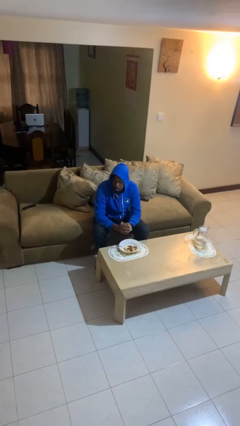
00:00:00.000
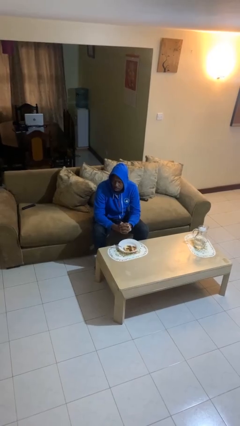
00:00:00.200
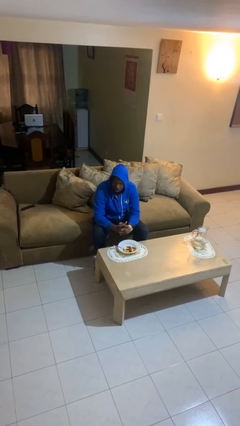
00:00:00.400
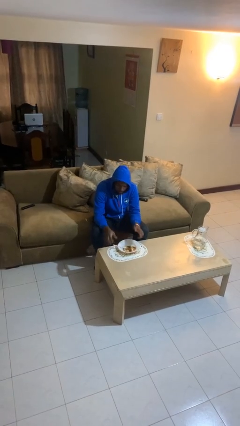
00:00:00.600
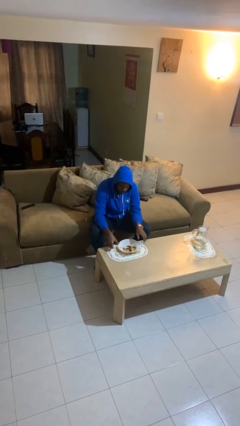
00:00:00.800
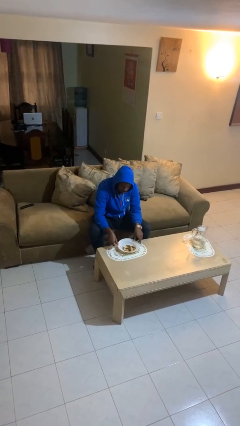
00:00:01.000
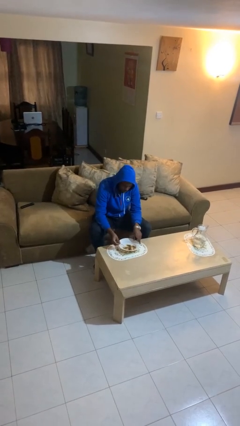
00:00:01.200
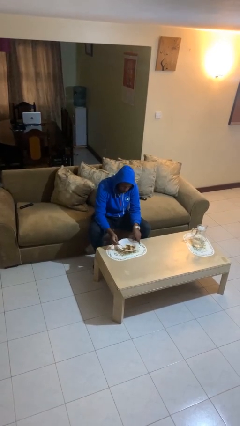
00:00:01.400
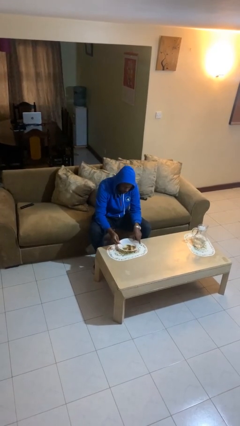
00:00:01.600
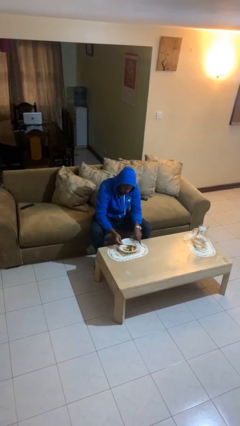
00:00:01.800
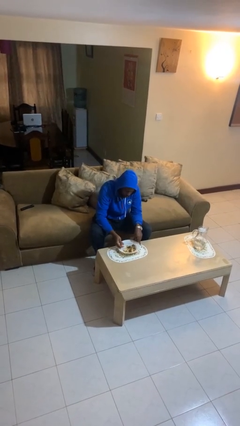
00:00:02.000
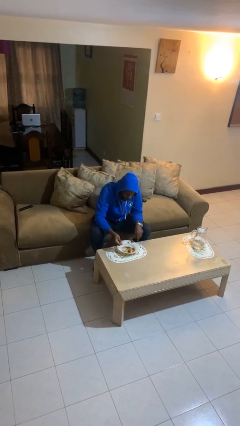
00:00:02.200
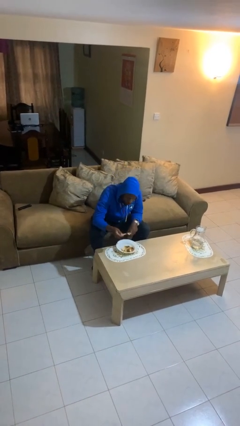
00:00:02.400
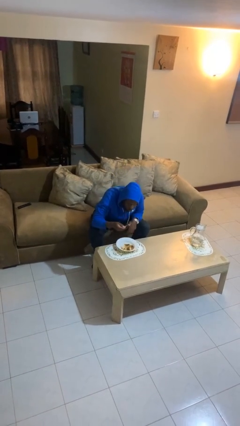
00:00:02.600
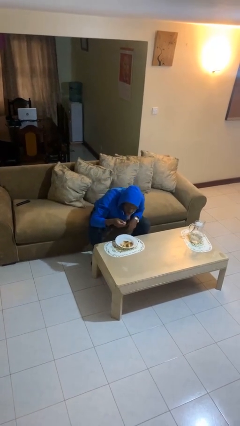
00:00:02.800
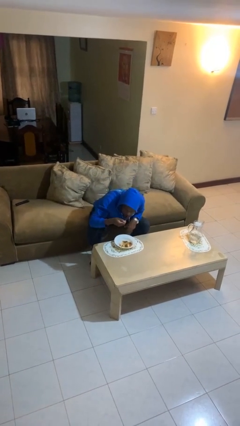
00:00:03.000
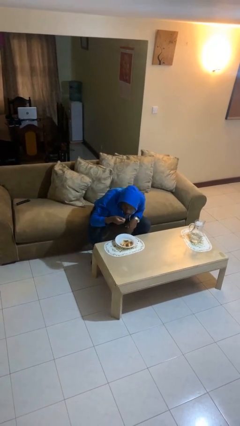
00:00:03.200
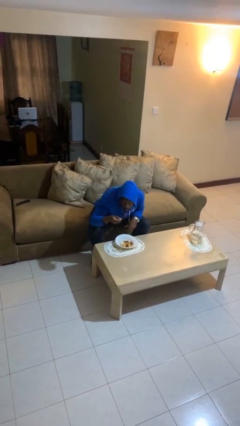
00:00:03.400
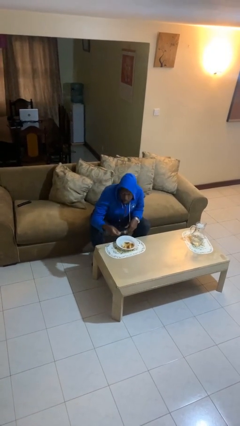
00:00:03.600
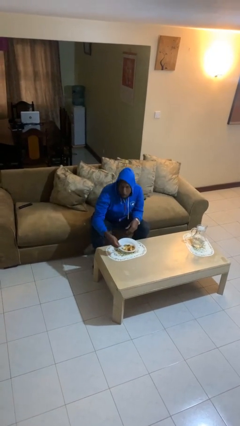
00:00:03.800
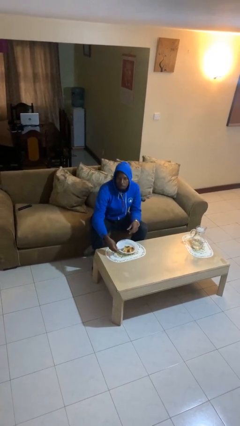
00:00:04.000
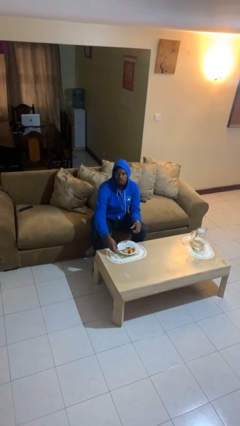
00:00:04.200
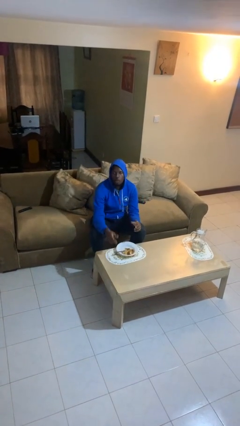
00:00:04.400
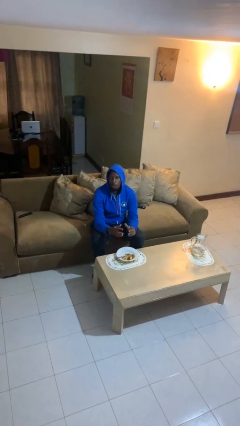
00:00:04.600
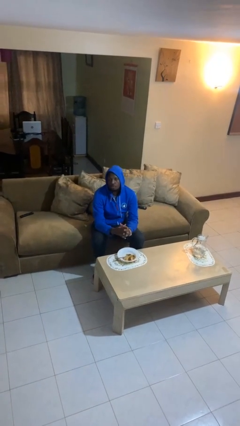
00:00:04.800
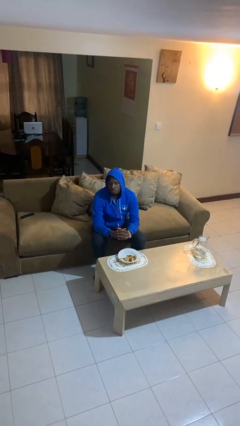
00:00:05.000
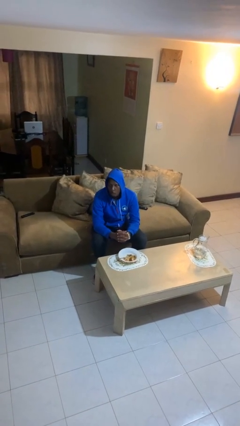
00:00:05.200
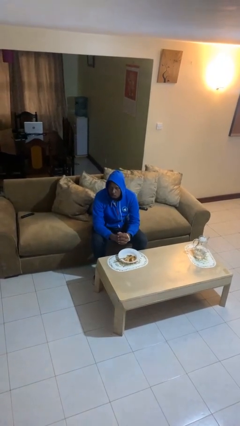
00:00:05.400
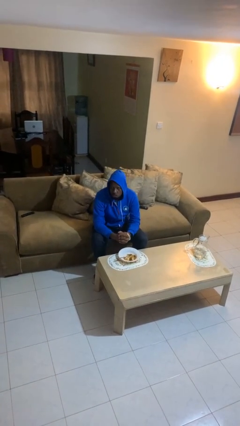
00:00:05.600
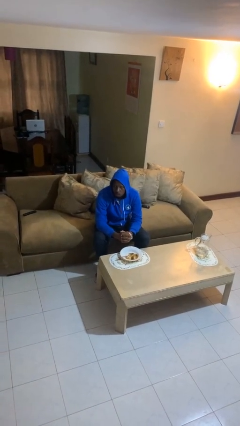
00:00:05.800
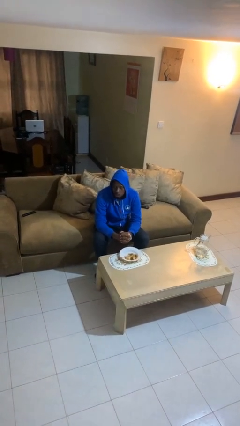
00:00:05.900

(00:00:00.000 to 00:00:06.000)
person eats with utensil

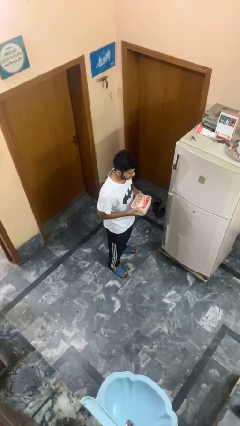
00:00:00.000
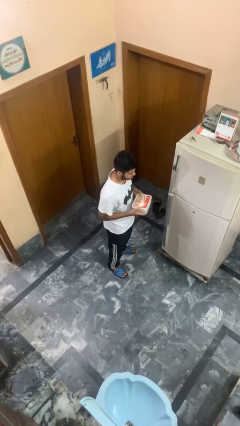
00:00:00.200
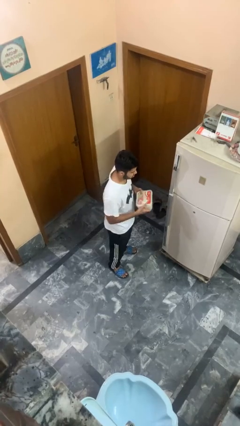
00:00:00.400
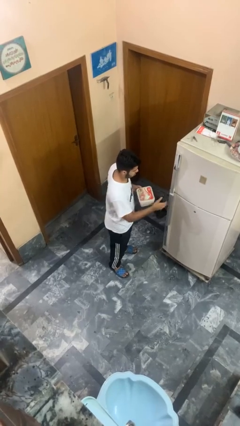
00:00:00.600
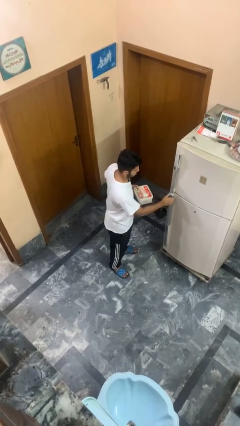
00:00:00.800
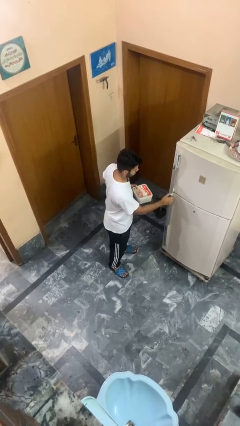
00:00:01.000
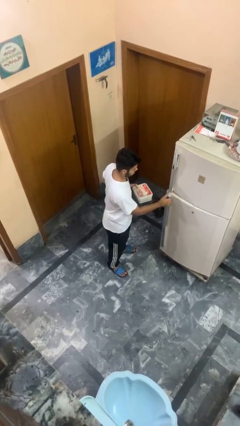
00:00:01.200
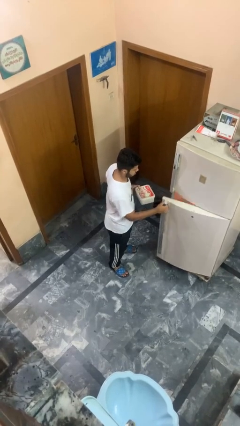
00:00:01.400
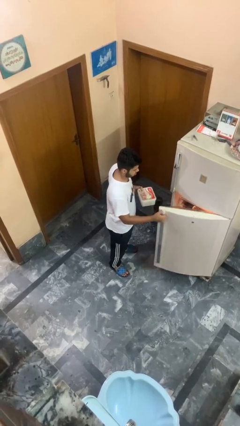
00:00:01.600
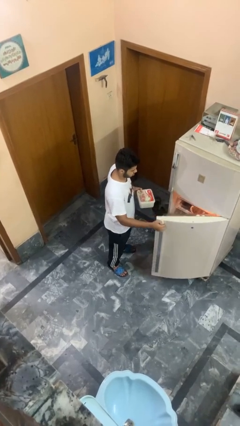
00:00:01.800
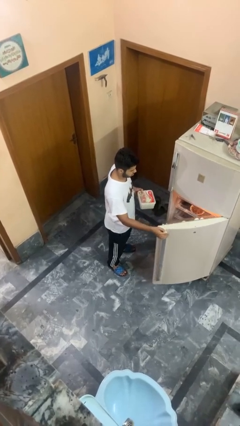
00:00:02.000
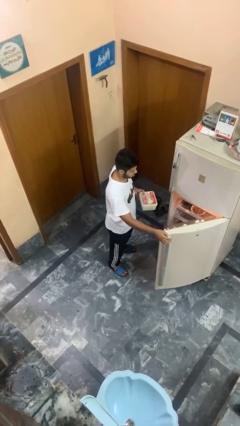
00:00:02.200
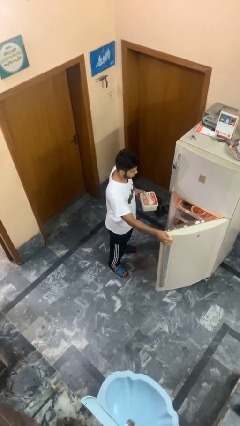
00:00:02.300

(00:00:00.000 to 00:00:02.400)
person opens refrigerator

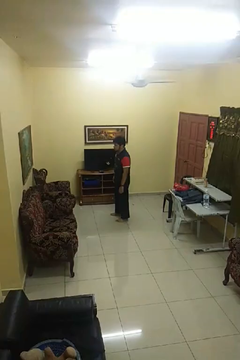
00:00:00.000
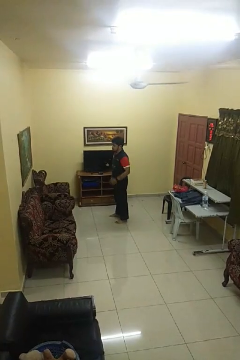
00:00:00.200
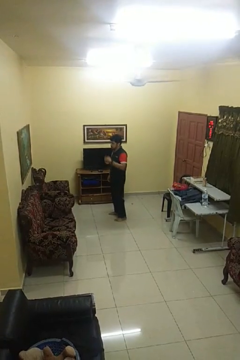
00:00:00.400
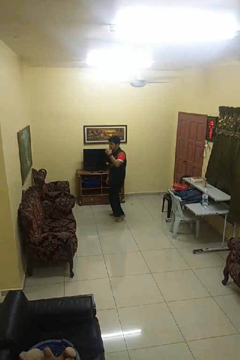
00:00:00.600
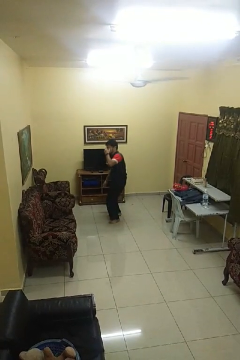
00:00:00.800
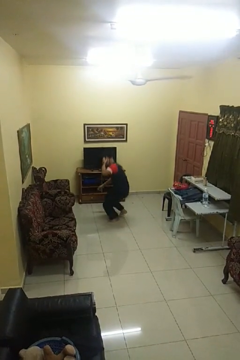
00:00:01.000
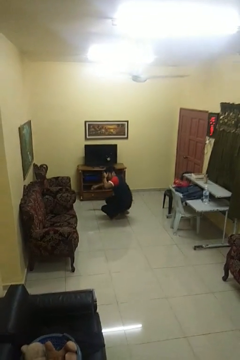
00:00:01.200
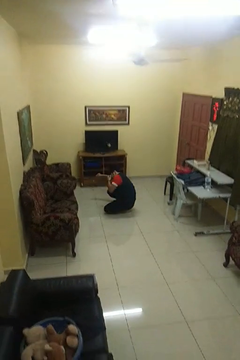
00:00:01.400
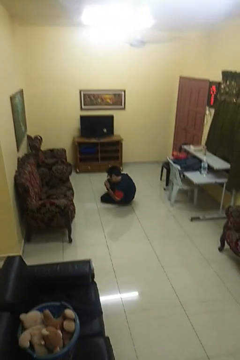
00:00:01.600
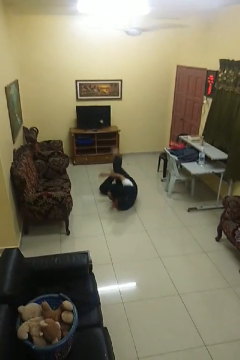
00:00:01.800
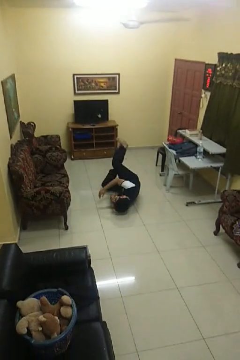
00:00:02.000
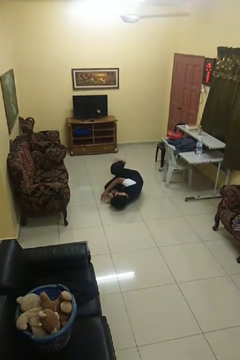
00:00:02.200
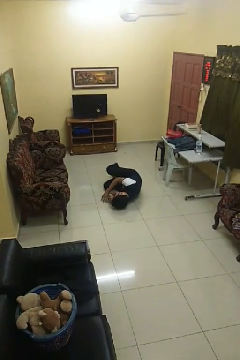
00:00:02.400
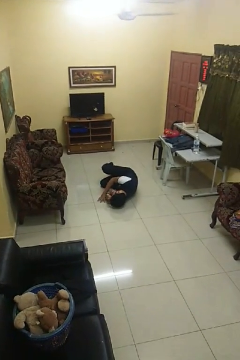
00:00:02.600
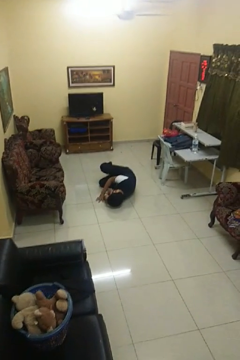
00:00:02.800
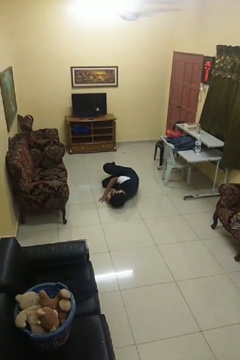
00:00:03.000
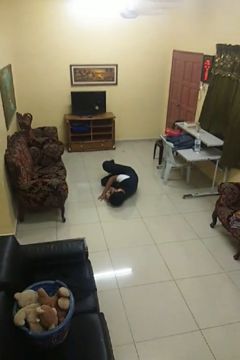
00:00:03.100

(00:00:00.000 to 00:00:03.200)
person falls while standing

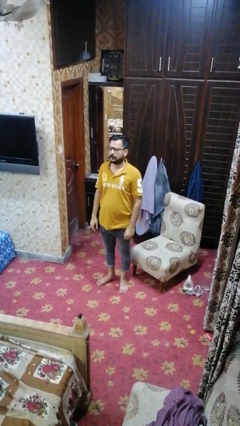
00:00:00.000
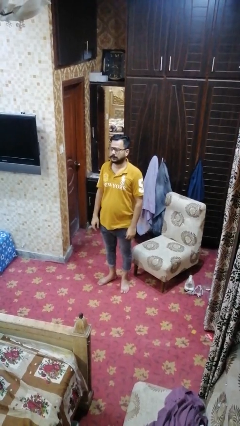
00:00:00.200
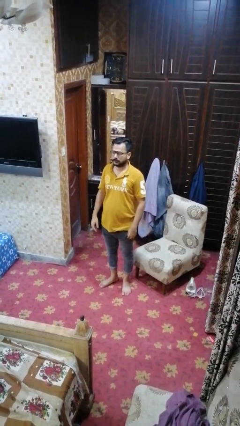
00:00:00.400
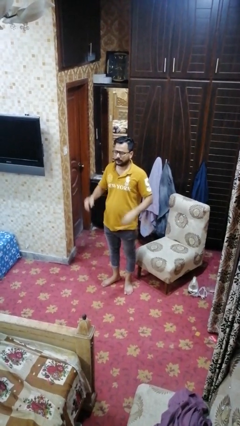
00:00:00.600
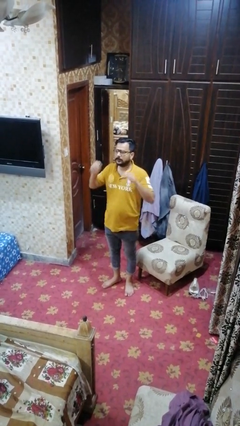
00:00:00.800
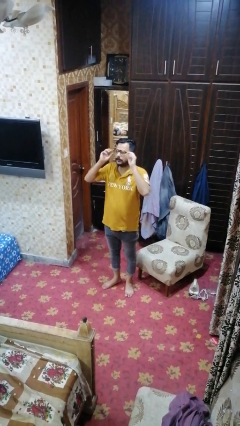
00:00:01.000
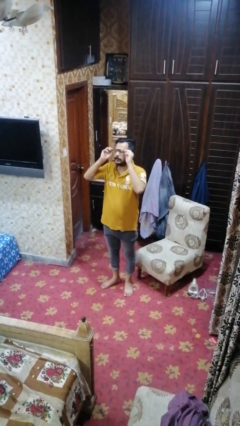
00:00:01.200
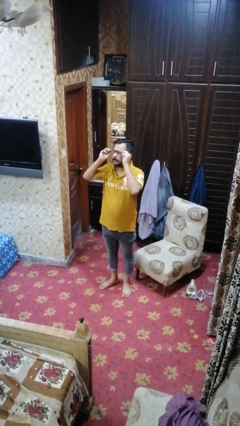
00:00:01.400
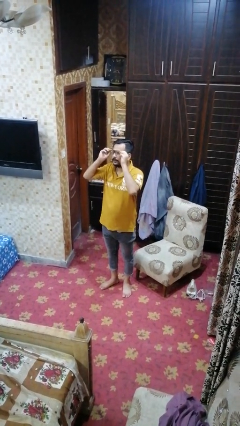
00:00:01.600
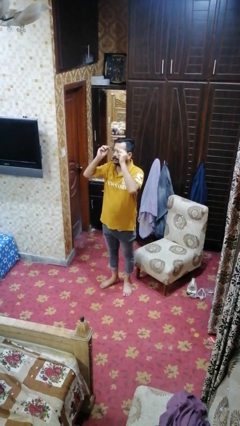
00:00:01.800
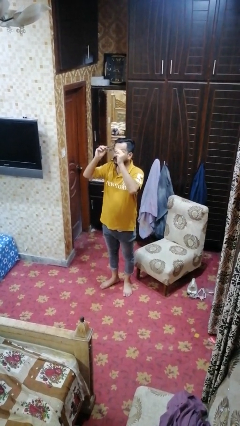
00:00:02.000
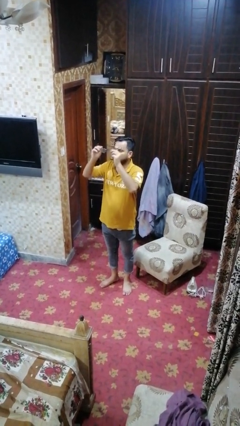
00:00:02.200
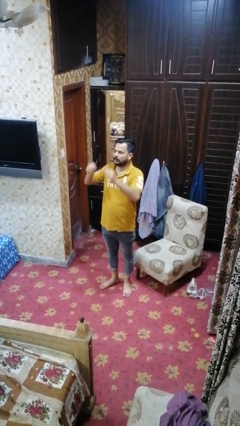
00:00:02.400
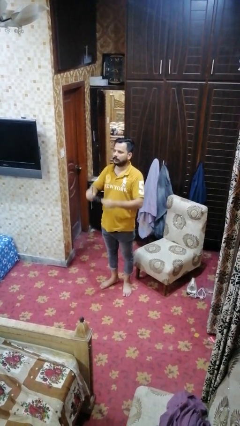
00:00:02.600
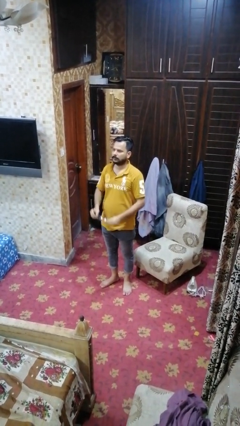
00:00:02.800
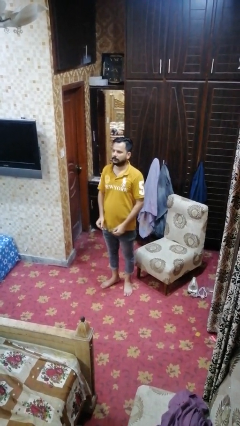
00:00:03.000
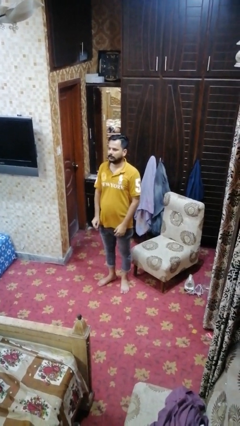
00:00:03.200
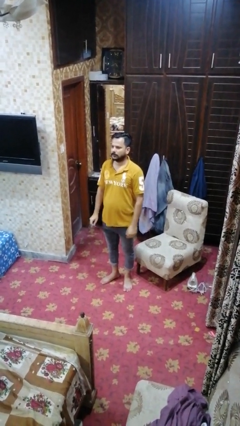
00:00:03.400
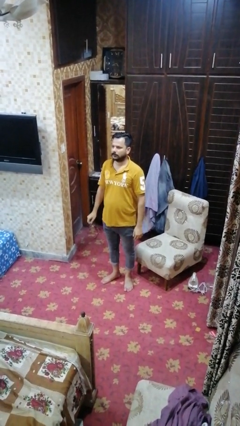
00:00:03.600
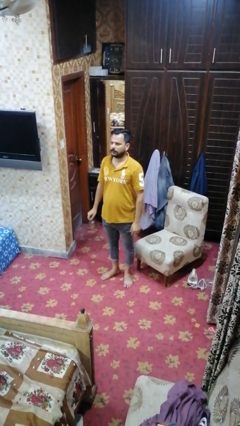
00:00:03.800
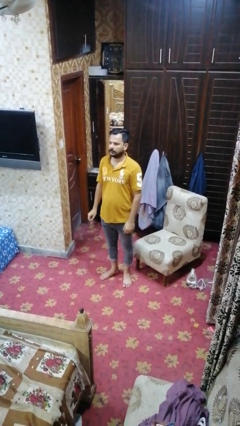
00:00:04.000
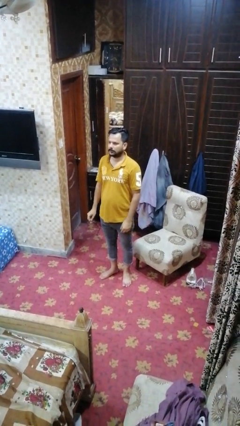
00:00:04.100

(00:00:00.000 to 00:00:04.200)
person takes off glasses

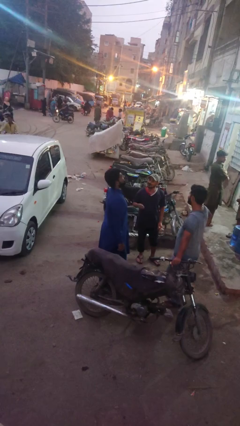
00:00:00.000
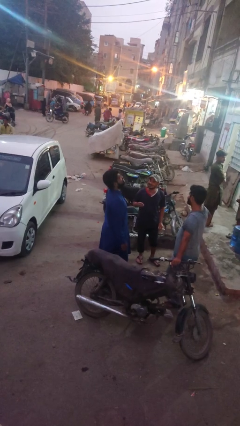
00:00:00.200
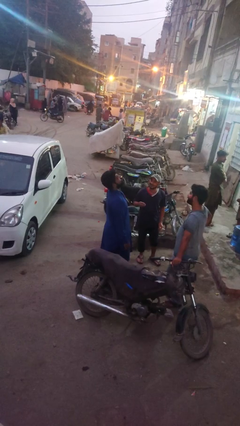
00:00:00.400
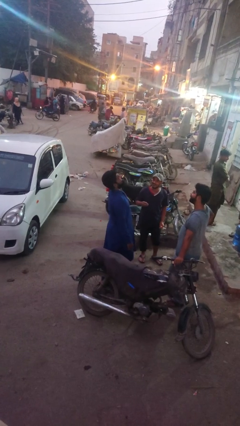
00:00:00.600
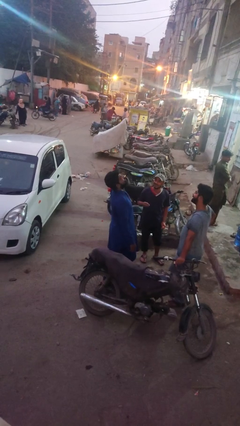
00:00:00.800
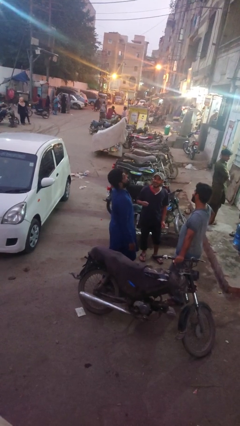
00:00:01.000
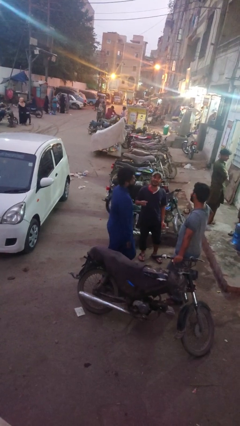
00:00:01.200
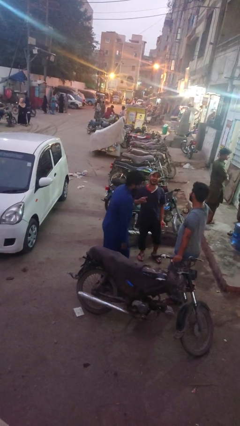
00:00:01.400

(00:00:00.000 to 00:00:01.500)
person laughs with person

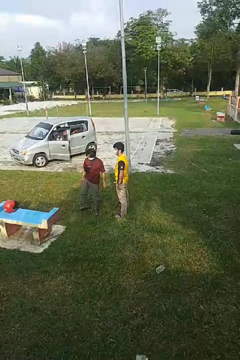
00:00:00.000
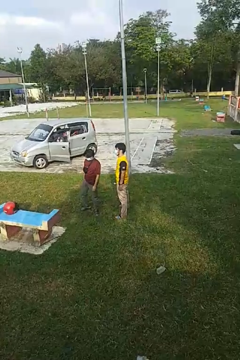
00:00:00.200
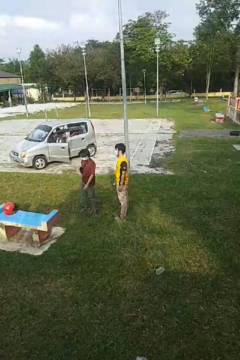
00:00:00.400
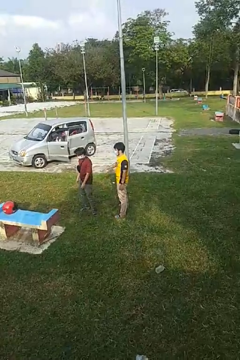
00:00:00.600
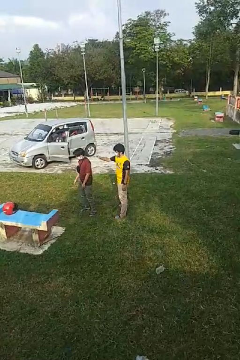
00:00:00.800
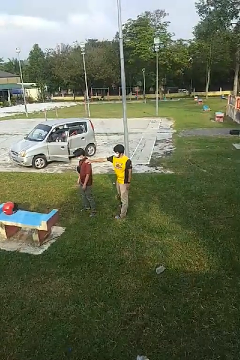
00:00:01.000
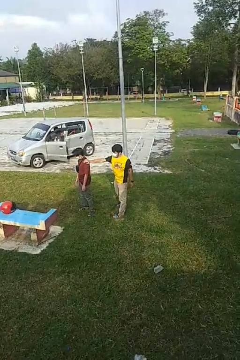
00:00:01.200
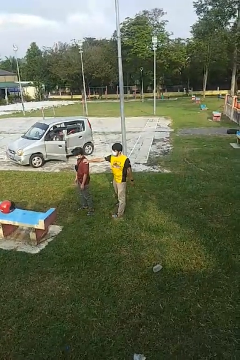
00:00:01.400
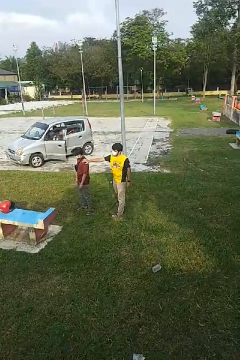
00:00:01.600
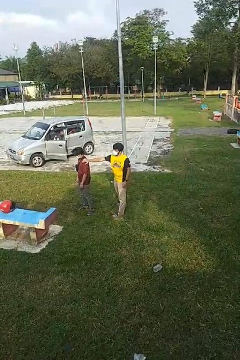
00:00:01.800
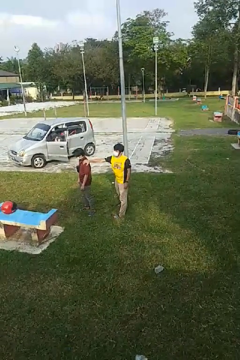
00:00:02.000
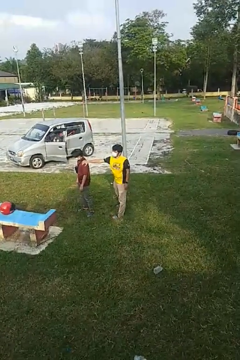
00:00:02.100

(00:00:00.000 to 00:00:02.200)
person grabs person by shoulder
